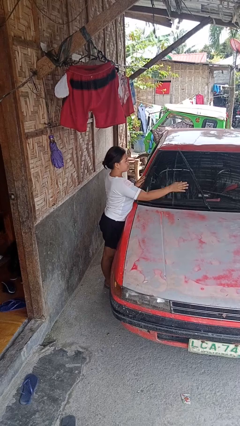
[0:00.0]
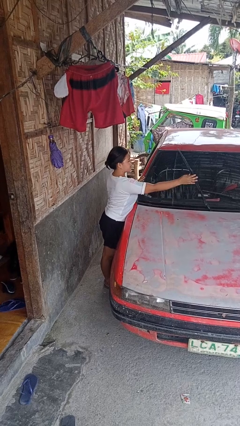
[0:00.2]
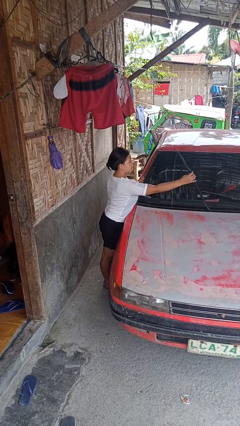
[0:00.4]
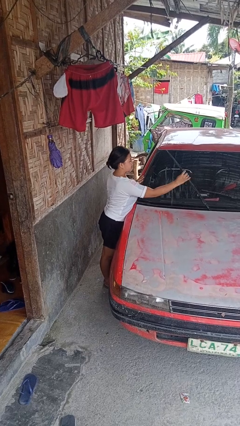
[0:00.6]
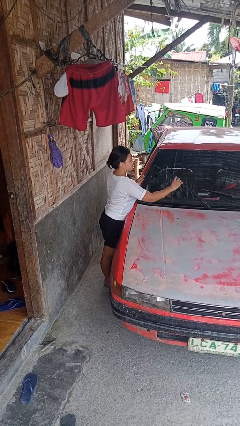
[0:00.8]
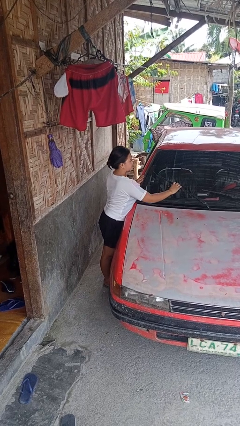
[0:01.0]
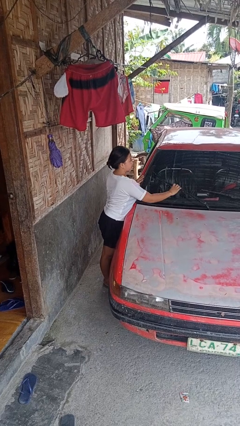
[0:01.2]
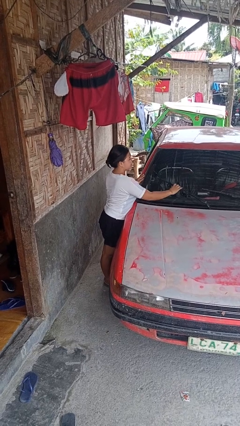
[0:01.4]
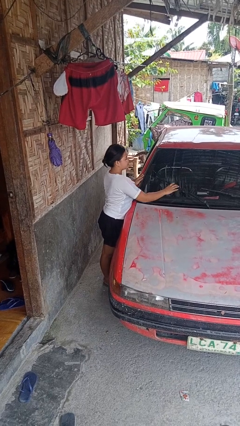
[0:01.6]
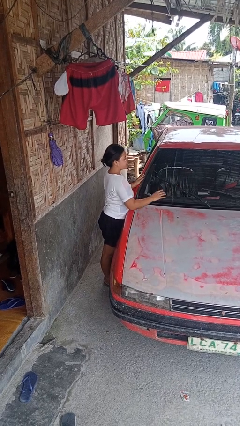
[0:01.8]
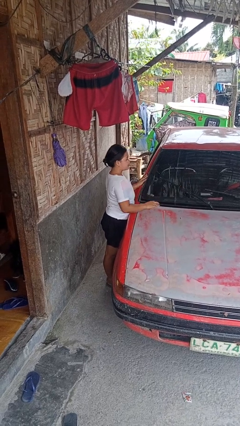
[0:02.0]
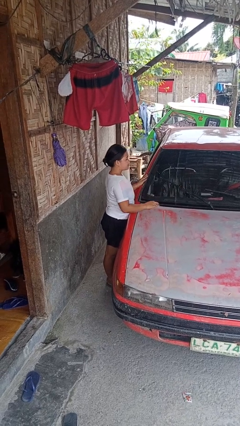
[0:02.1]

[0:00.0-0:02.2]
person flips down car wipers

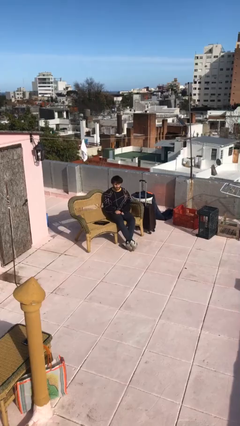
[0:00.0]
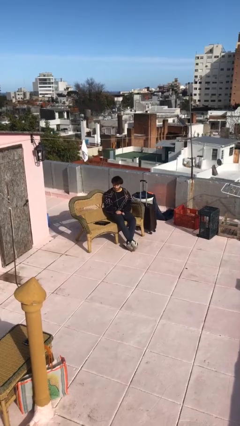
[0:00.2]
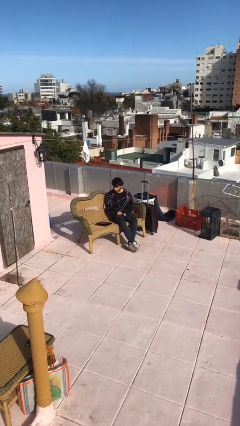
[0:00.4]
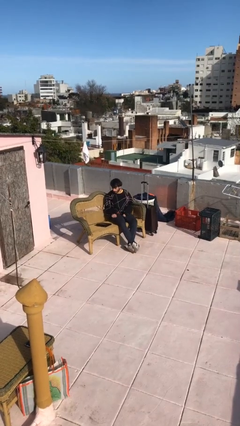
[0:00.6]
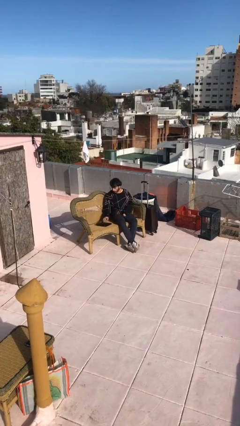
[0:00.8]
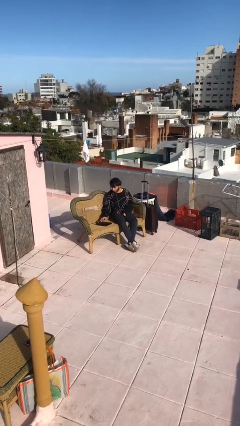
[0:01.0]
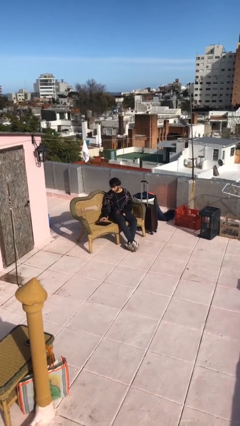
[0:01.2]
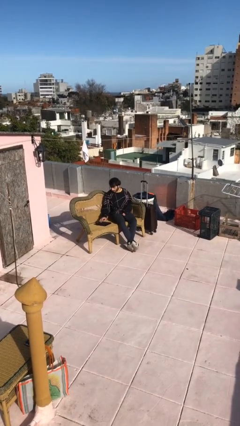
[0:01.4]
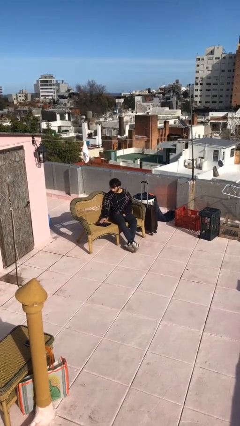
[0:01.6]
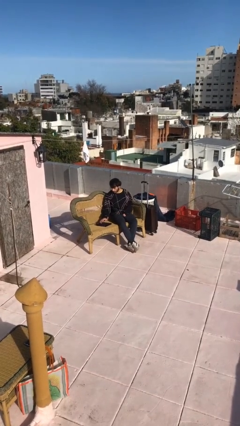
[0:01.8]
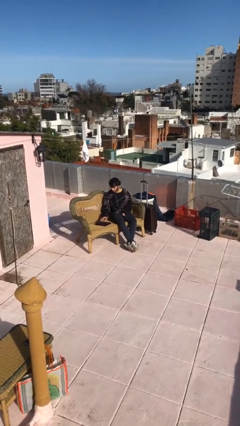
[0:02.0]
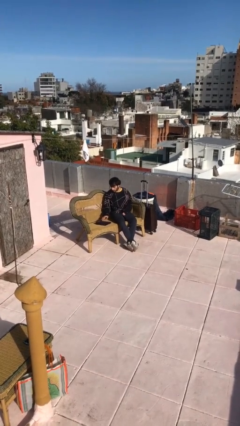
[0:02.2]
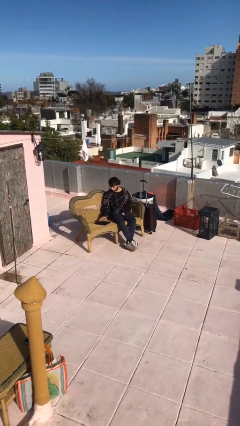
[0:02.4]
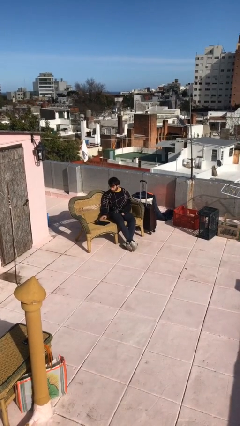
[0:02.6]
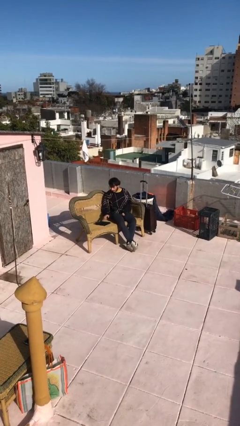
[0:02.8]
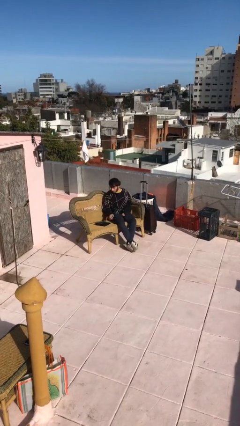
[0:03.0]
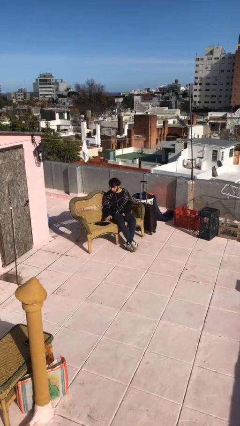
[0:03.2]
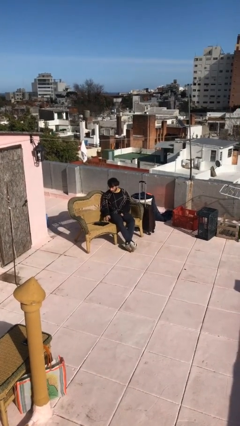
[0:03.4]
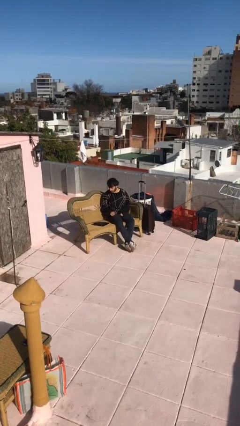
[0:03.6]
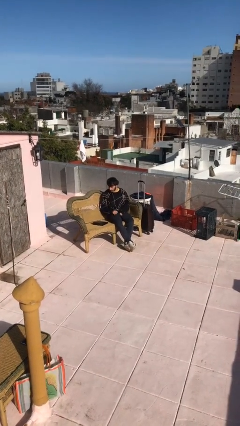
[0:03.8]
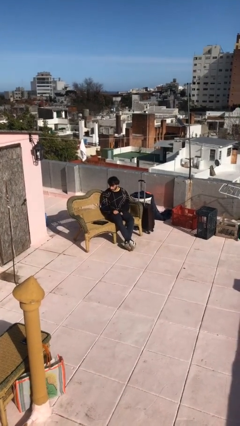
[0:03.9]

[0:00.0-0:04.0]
person taps object with finger

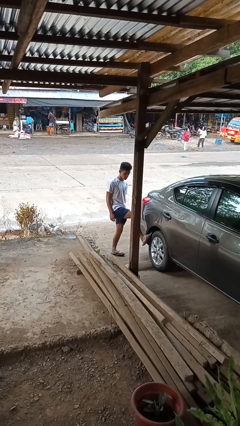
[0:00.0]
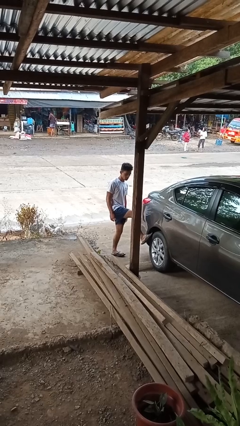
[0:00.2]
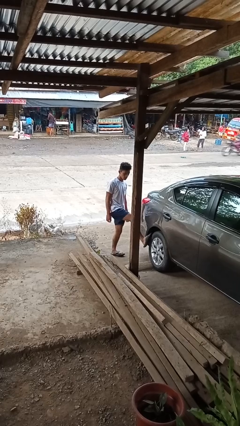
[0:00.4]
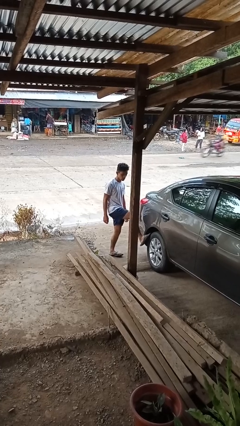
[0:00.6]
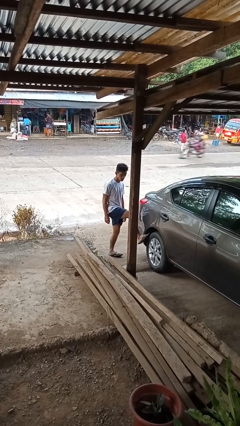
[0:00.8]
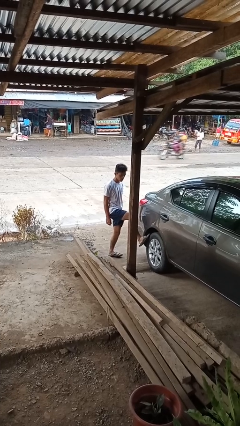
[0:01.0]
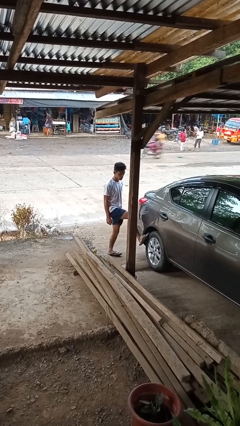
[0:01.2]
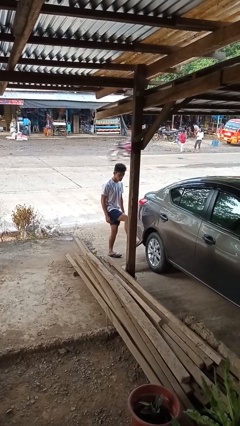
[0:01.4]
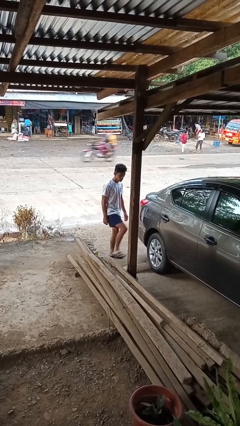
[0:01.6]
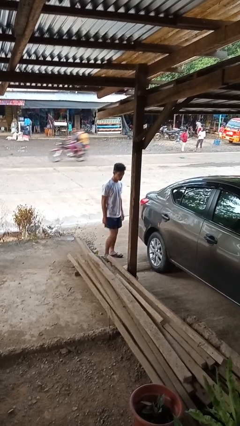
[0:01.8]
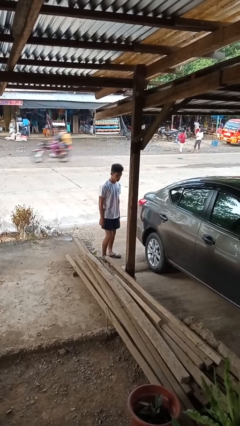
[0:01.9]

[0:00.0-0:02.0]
person kicks car tires

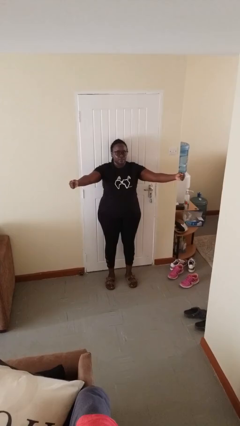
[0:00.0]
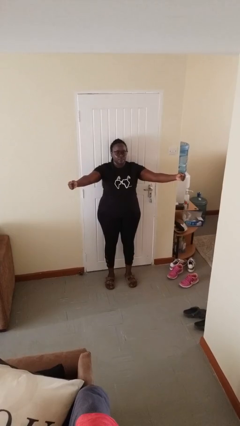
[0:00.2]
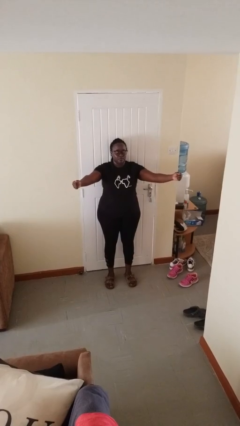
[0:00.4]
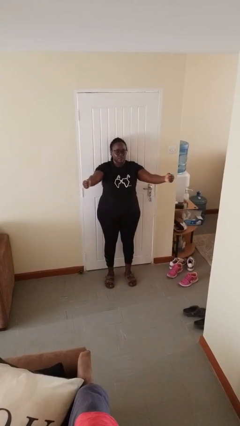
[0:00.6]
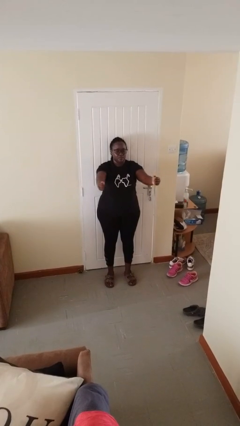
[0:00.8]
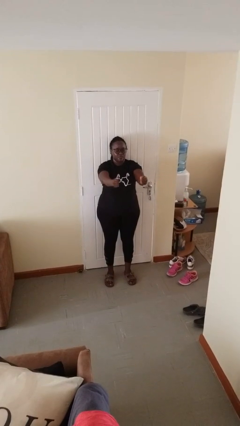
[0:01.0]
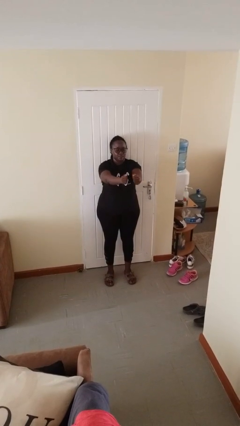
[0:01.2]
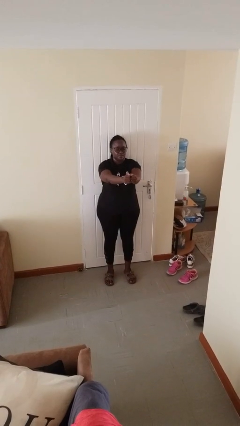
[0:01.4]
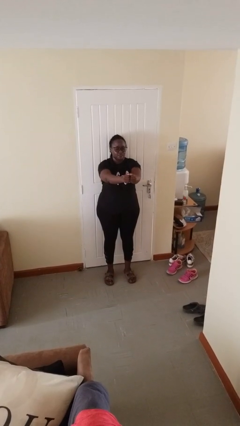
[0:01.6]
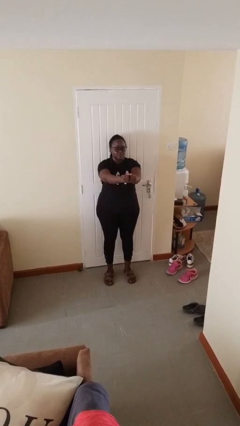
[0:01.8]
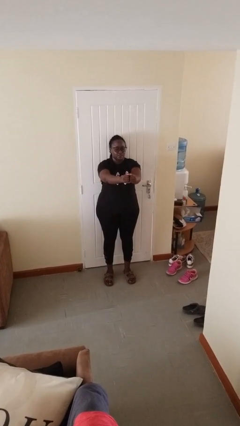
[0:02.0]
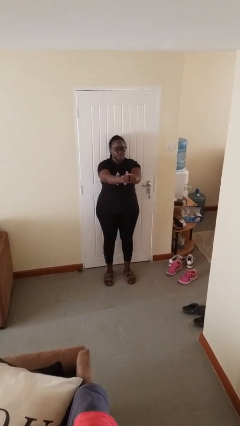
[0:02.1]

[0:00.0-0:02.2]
person gestures zoom out

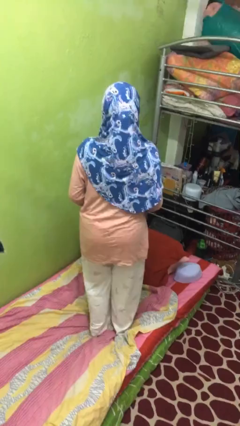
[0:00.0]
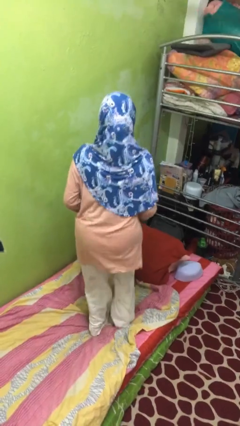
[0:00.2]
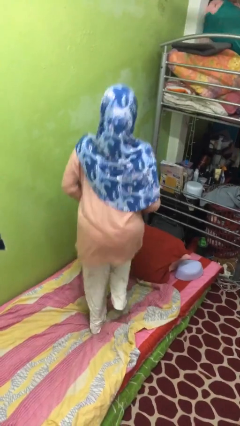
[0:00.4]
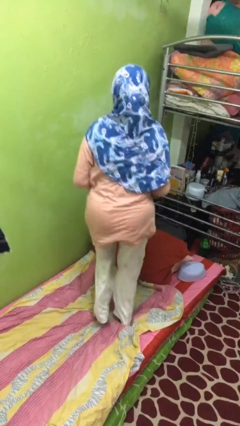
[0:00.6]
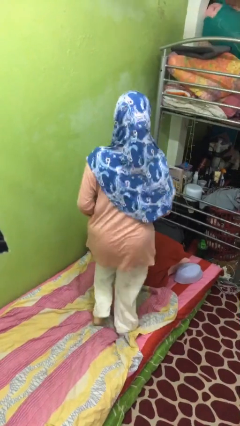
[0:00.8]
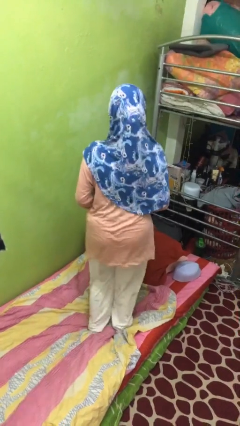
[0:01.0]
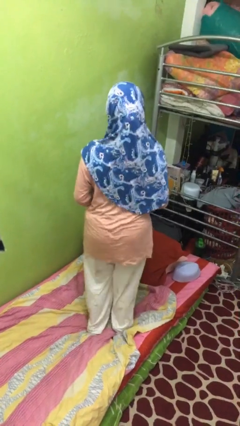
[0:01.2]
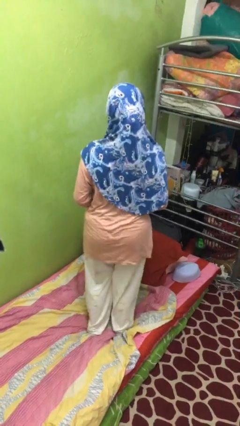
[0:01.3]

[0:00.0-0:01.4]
person jumps on bed

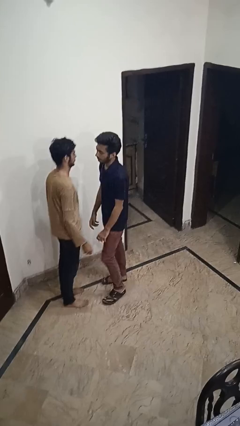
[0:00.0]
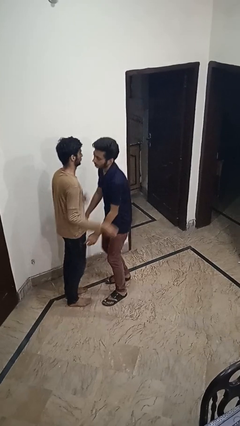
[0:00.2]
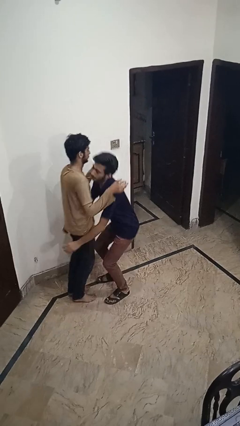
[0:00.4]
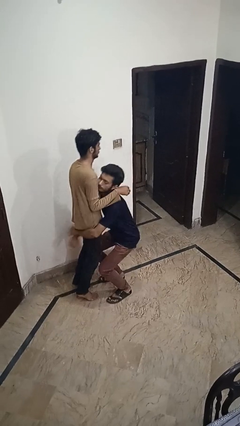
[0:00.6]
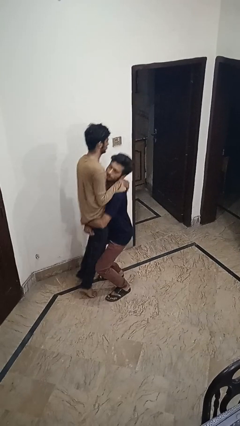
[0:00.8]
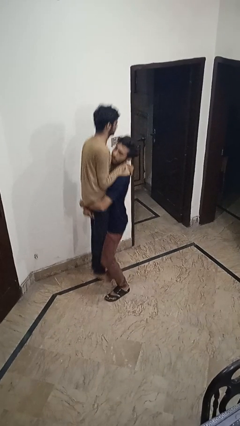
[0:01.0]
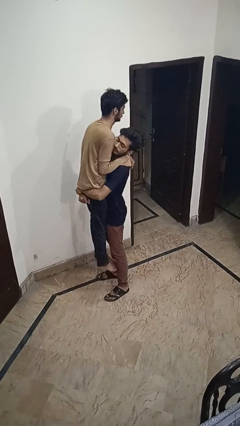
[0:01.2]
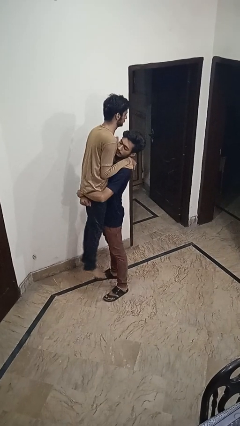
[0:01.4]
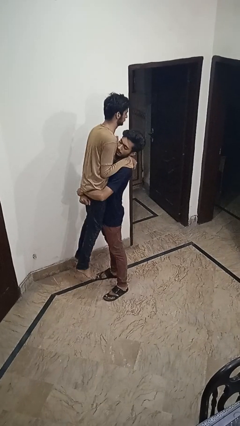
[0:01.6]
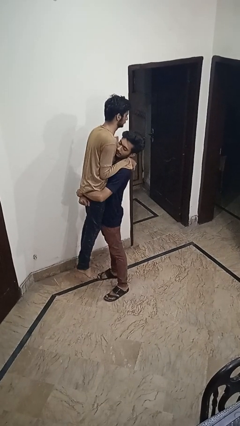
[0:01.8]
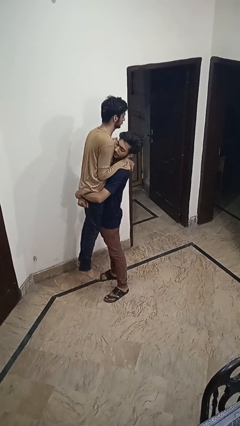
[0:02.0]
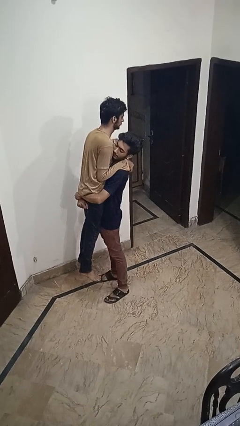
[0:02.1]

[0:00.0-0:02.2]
person picks up person

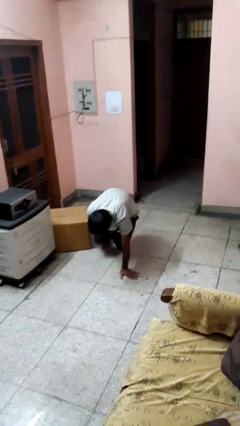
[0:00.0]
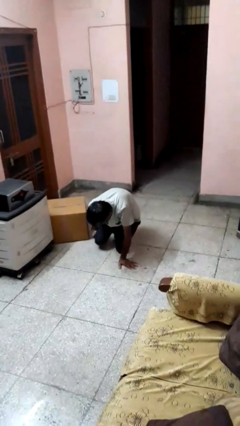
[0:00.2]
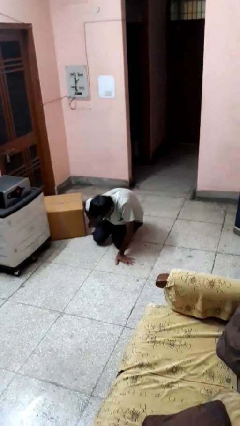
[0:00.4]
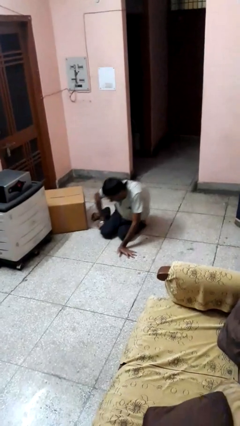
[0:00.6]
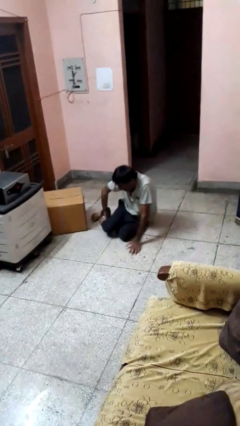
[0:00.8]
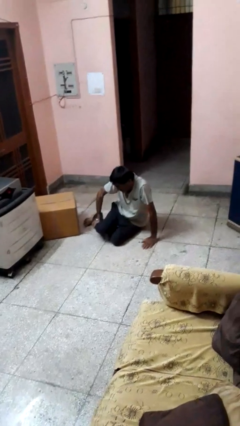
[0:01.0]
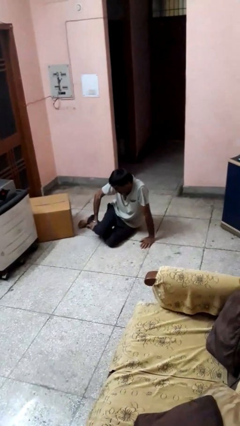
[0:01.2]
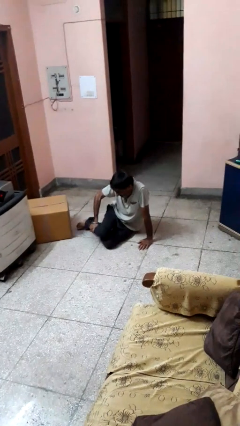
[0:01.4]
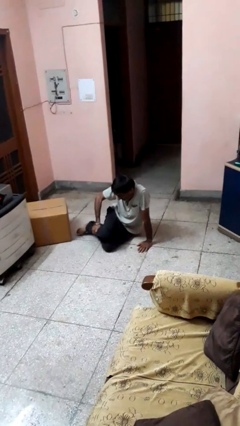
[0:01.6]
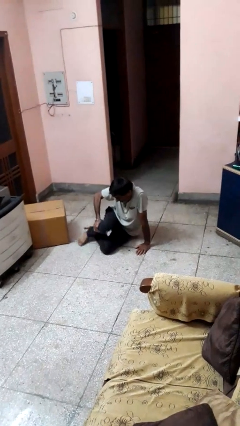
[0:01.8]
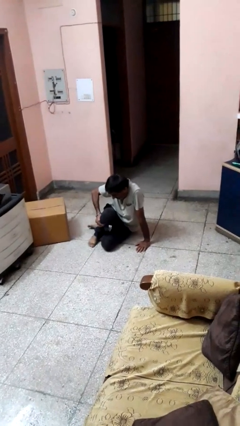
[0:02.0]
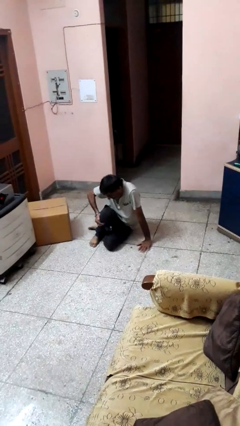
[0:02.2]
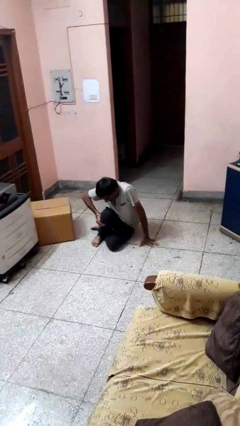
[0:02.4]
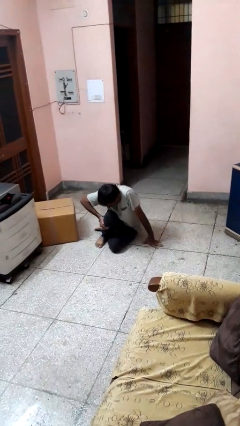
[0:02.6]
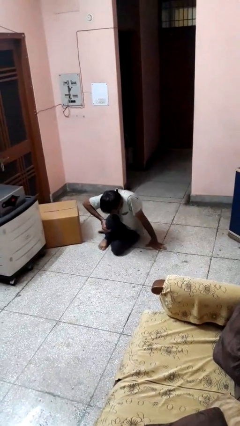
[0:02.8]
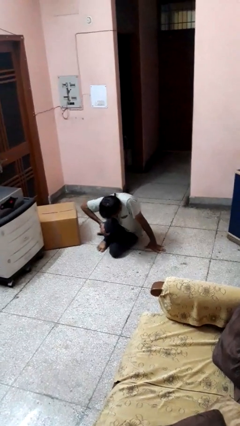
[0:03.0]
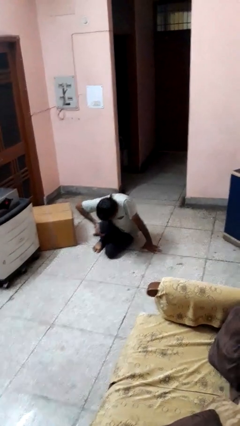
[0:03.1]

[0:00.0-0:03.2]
person lies down on floor

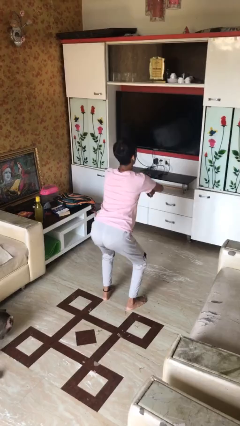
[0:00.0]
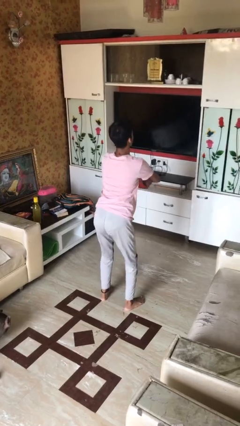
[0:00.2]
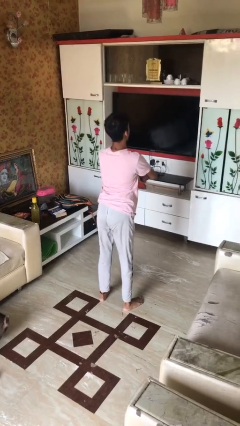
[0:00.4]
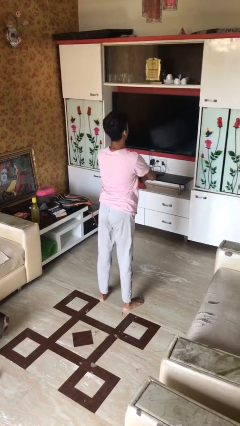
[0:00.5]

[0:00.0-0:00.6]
person stands up
